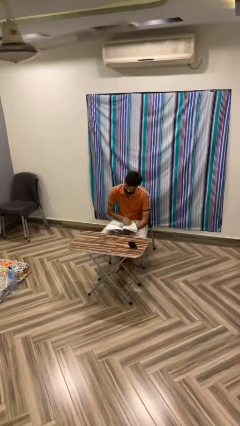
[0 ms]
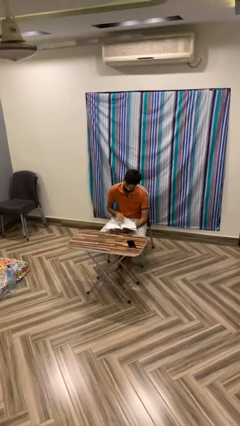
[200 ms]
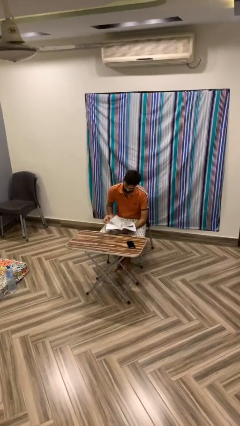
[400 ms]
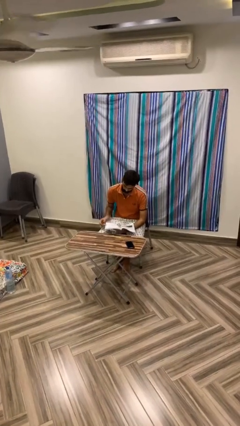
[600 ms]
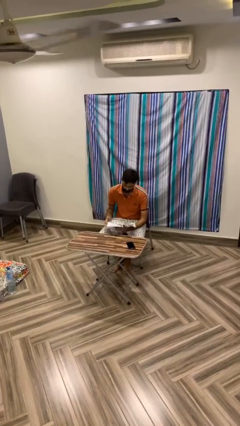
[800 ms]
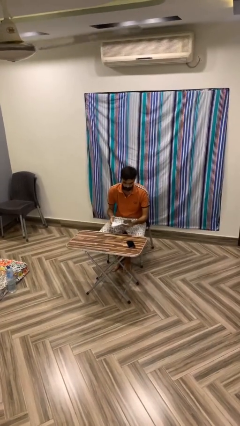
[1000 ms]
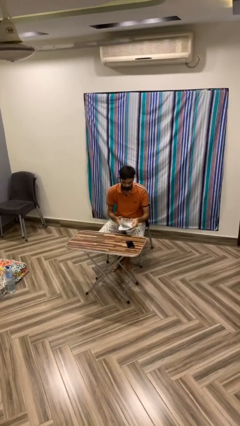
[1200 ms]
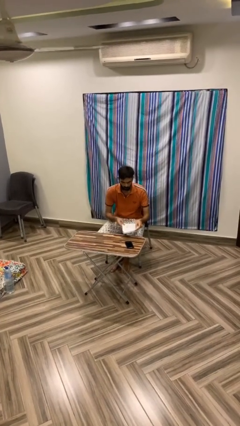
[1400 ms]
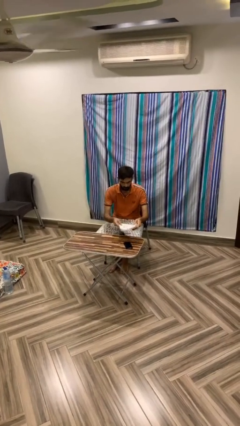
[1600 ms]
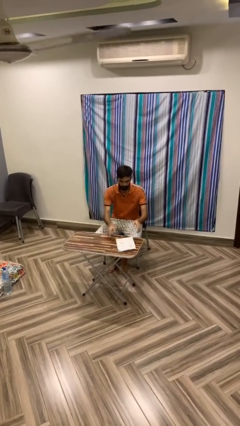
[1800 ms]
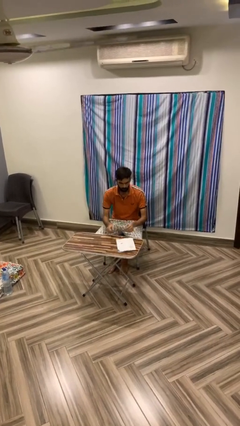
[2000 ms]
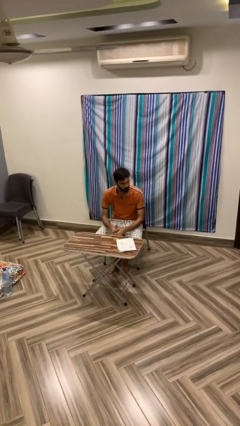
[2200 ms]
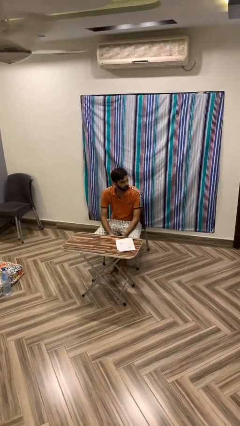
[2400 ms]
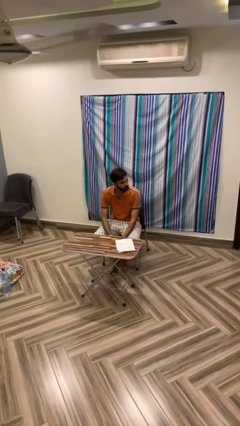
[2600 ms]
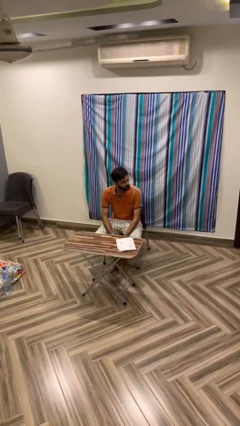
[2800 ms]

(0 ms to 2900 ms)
person puts down object on table

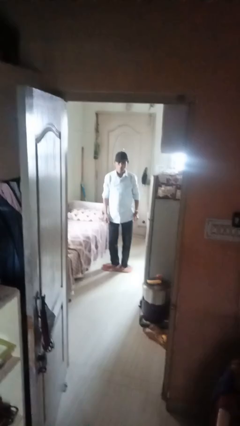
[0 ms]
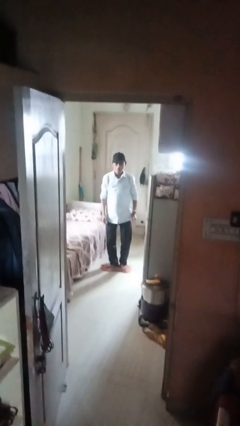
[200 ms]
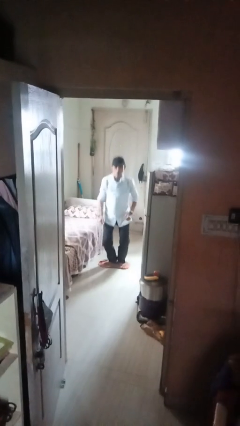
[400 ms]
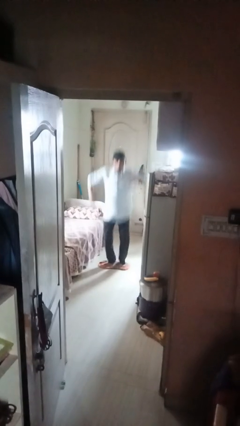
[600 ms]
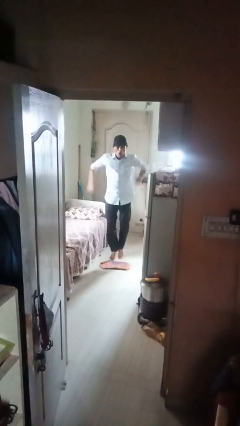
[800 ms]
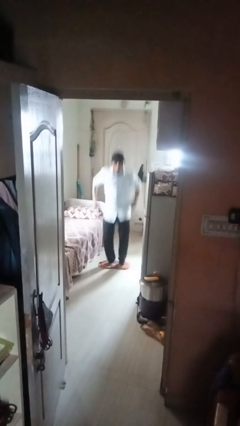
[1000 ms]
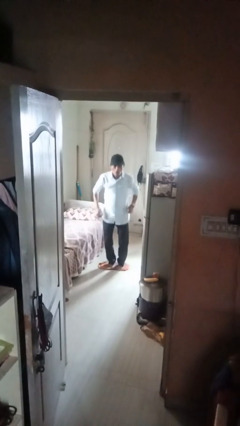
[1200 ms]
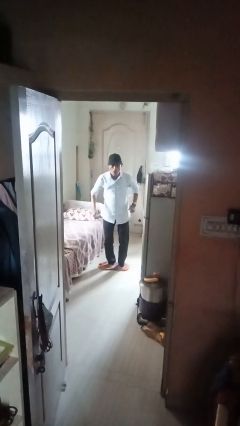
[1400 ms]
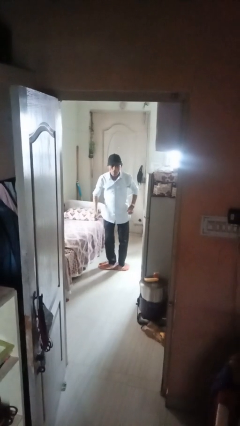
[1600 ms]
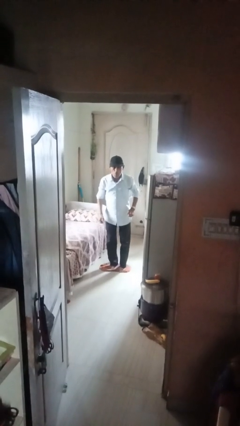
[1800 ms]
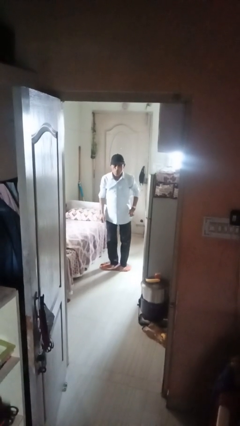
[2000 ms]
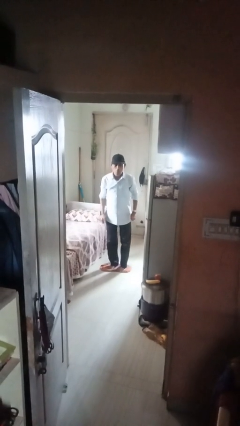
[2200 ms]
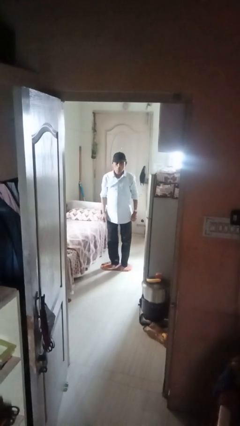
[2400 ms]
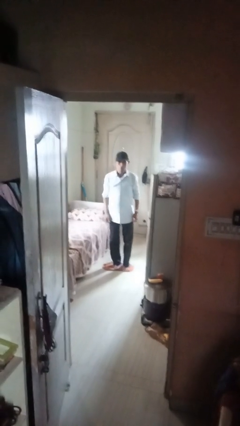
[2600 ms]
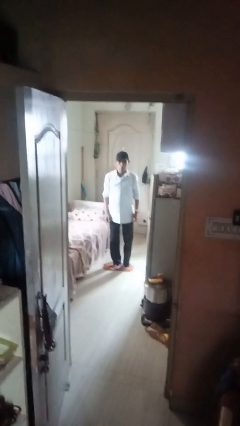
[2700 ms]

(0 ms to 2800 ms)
person jumps

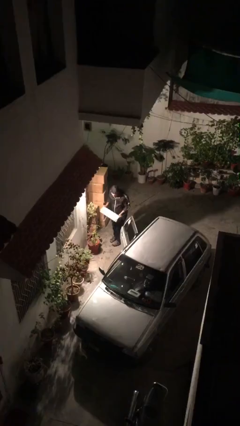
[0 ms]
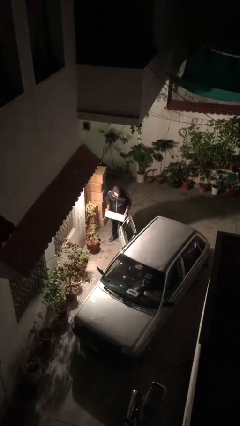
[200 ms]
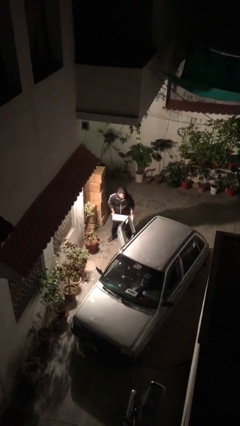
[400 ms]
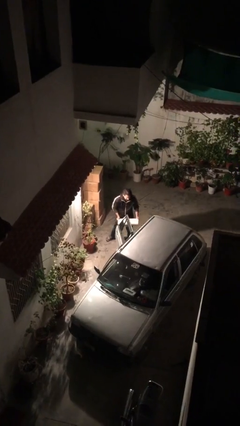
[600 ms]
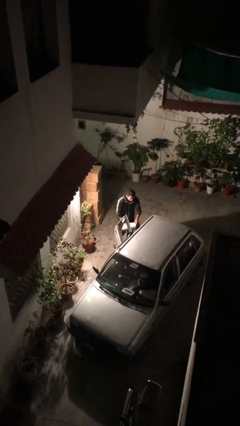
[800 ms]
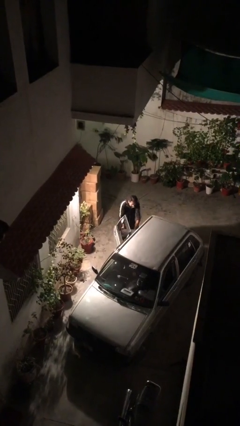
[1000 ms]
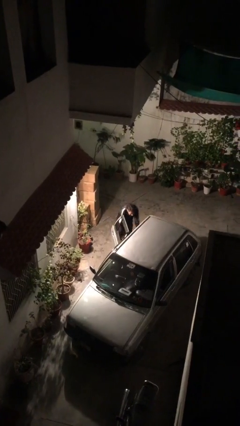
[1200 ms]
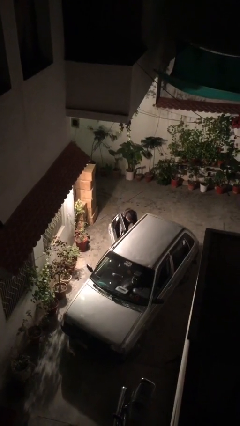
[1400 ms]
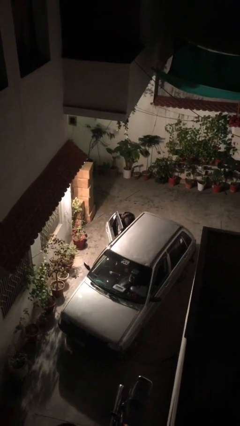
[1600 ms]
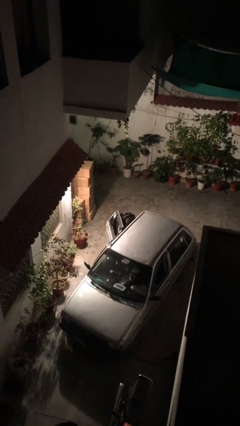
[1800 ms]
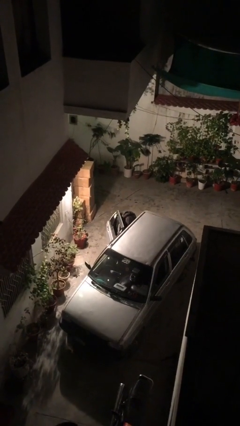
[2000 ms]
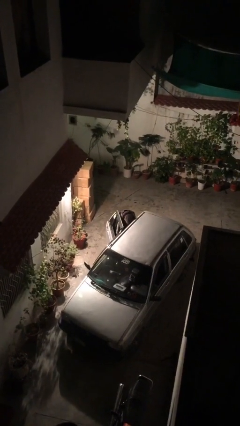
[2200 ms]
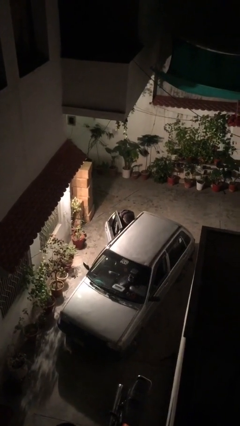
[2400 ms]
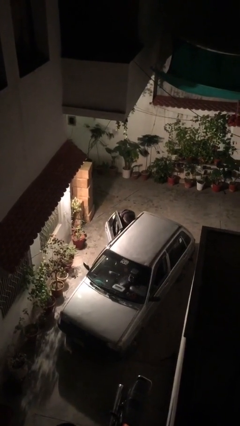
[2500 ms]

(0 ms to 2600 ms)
person loads car

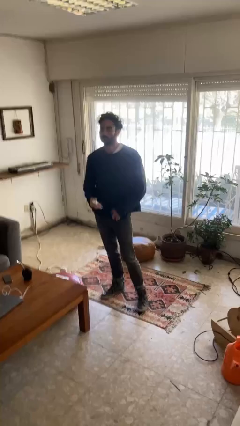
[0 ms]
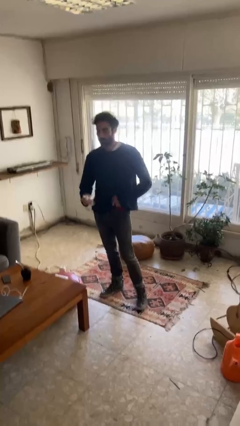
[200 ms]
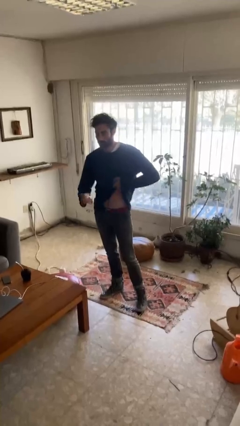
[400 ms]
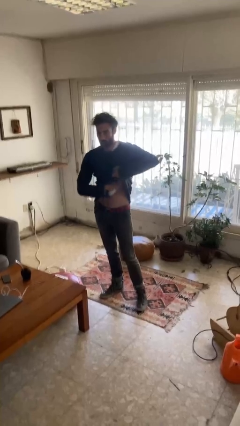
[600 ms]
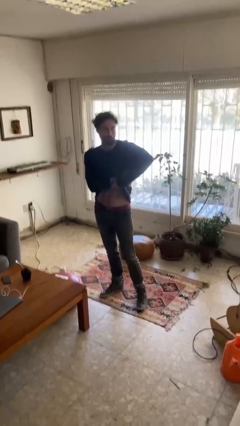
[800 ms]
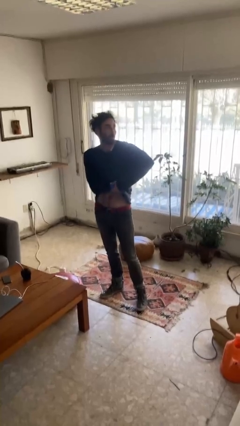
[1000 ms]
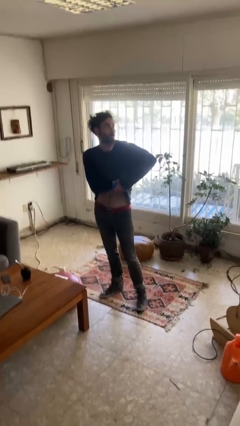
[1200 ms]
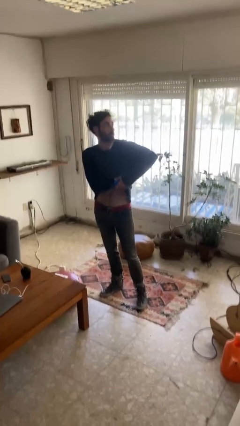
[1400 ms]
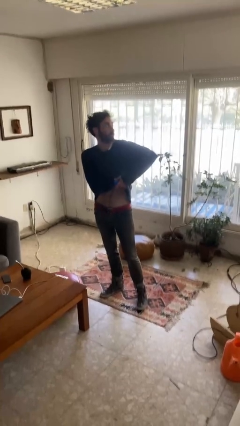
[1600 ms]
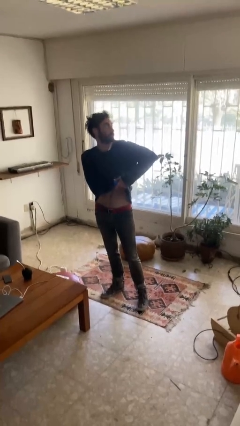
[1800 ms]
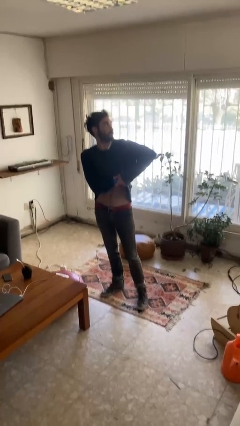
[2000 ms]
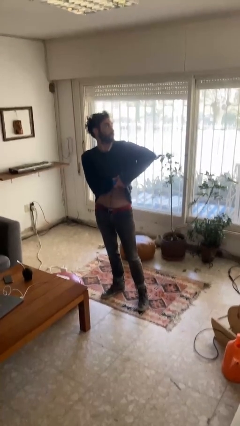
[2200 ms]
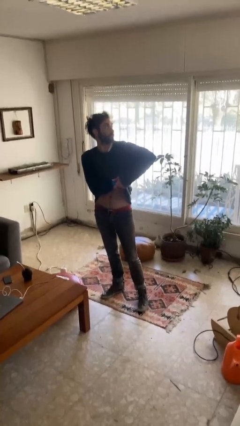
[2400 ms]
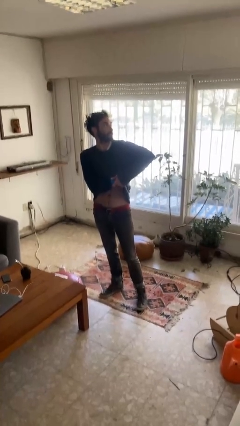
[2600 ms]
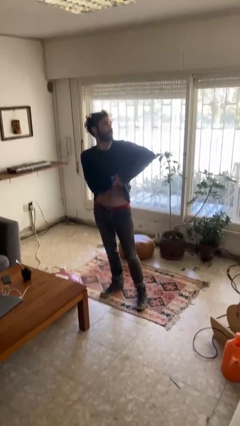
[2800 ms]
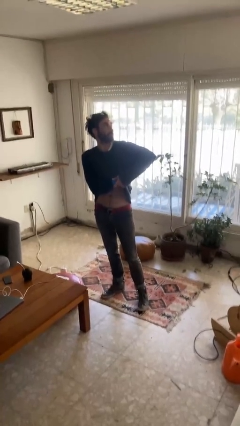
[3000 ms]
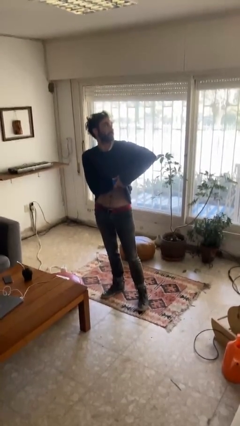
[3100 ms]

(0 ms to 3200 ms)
person applies deodorant

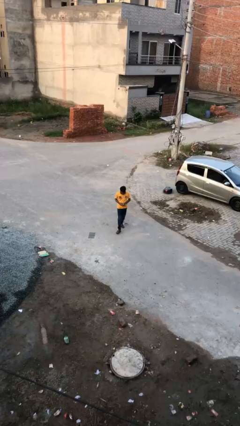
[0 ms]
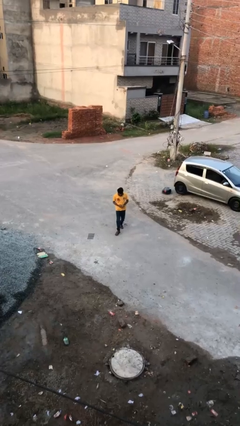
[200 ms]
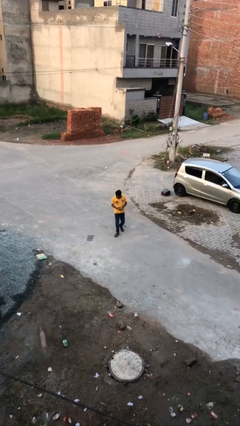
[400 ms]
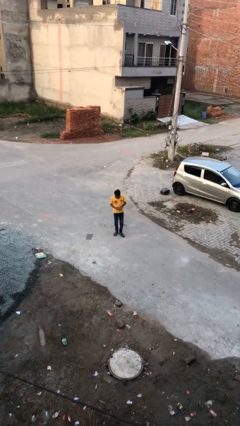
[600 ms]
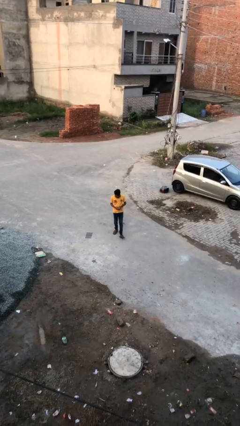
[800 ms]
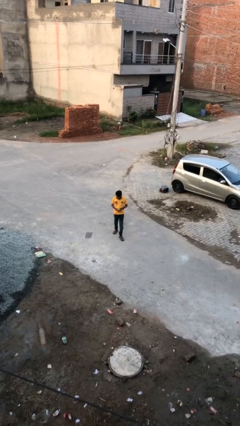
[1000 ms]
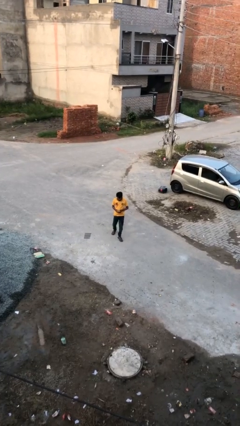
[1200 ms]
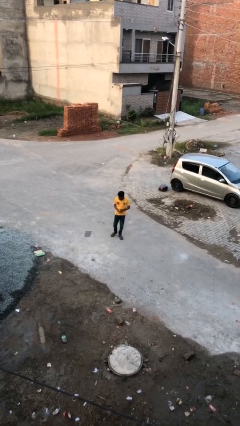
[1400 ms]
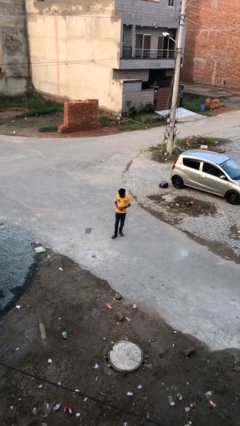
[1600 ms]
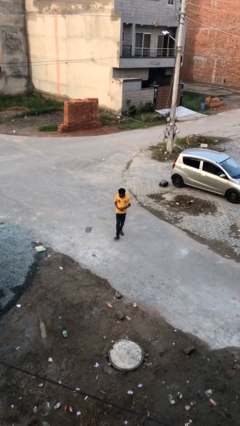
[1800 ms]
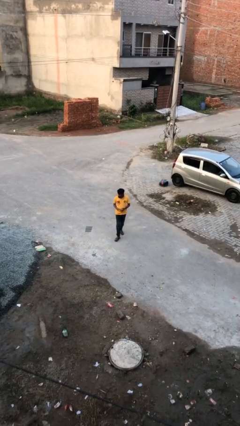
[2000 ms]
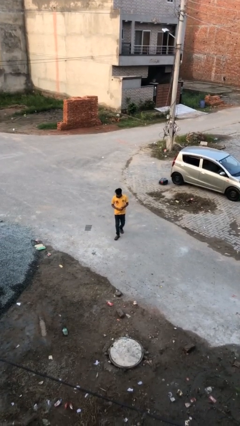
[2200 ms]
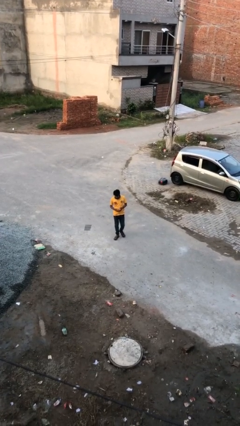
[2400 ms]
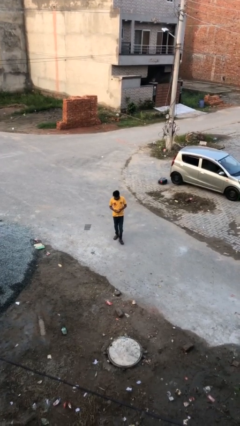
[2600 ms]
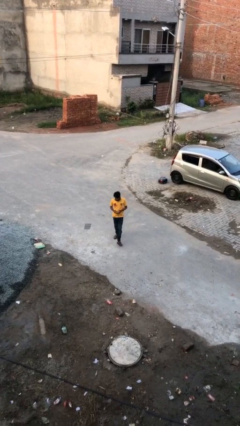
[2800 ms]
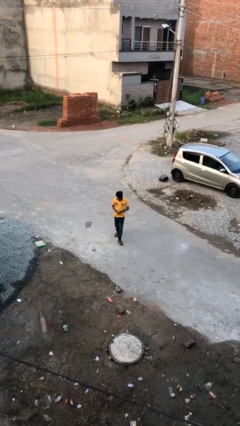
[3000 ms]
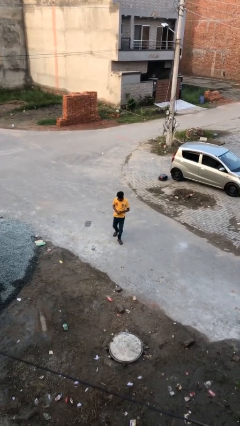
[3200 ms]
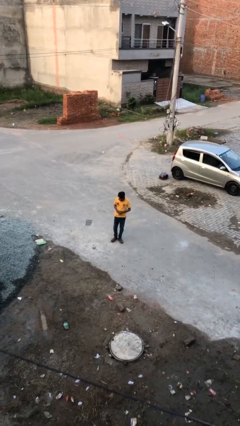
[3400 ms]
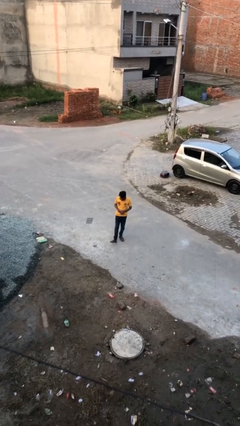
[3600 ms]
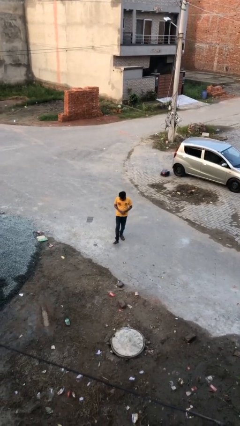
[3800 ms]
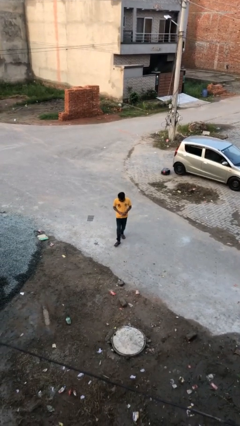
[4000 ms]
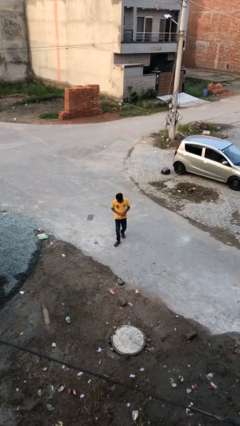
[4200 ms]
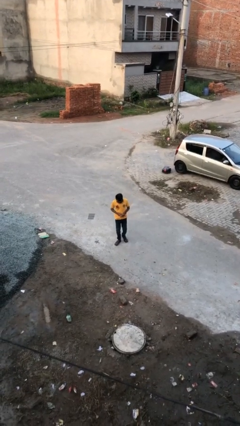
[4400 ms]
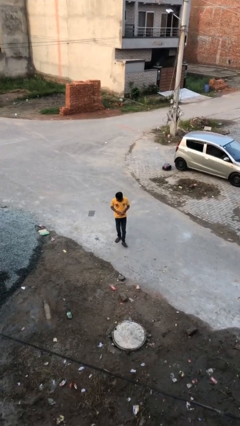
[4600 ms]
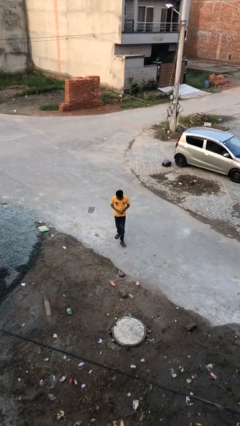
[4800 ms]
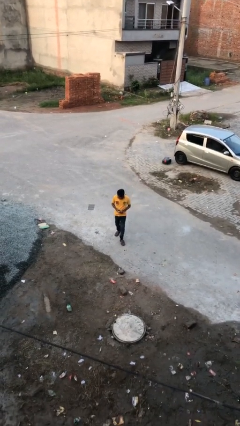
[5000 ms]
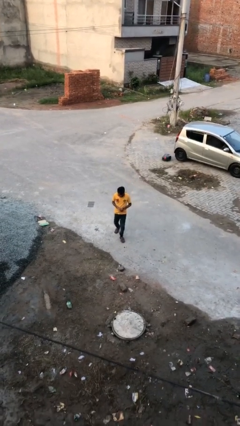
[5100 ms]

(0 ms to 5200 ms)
person texts on phone

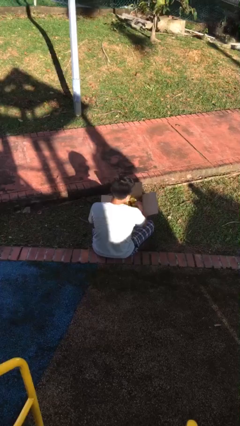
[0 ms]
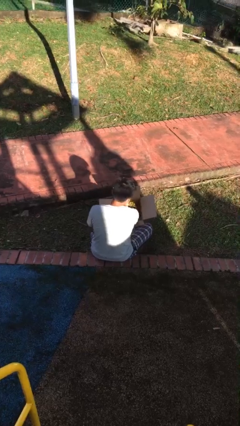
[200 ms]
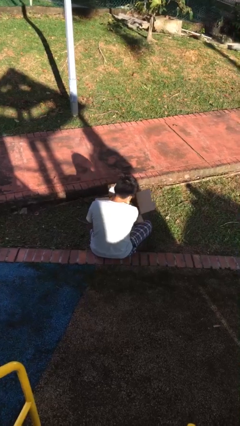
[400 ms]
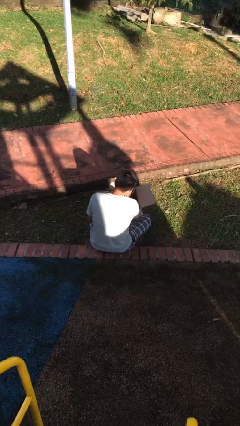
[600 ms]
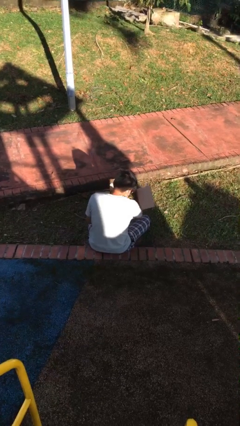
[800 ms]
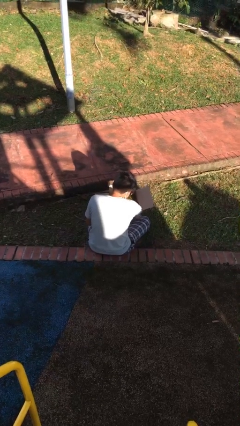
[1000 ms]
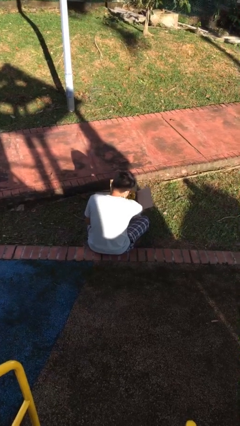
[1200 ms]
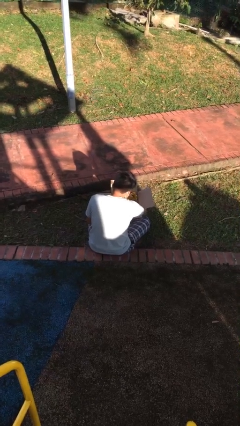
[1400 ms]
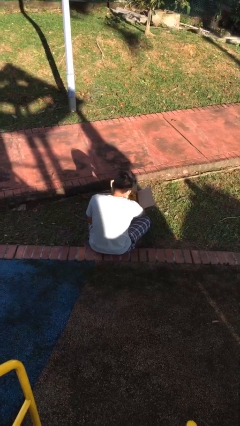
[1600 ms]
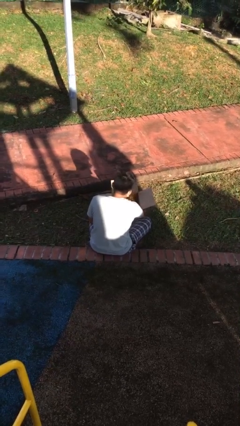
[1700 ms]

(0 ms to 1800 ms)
person searches in box
